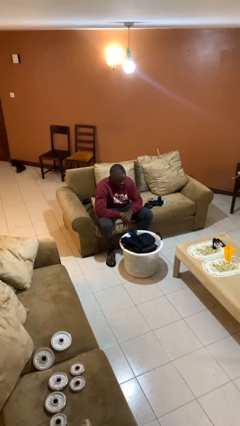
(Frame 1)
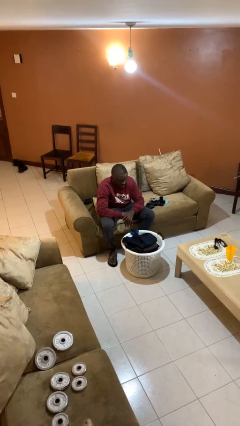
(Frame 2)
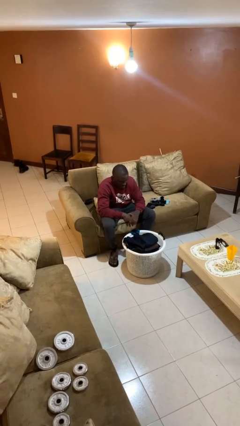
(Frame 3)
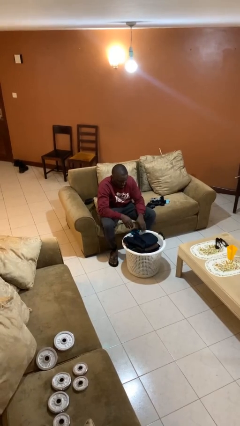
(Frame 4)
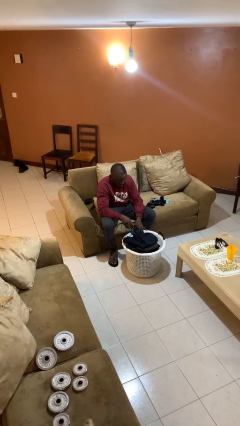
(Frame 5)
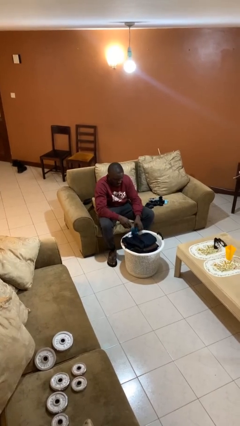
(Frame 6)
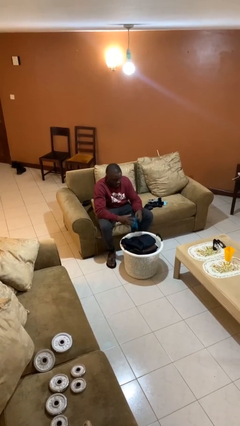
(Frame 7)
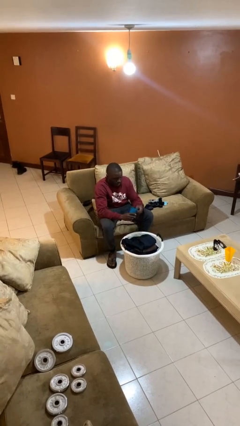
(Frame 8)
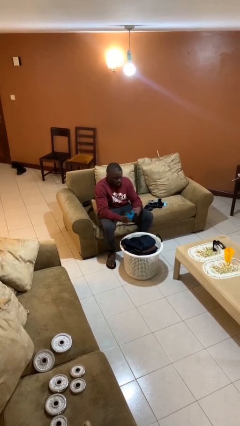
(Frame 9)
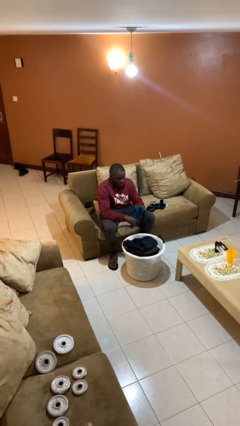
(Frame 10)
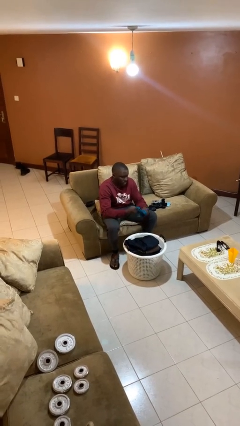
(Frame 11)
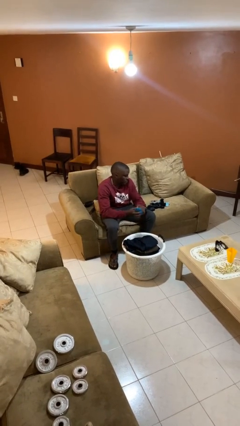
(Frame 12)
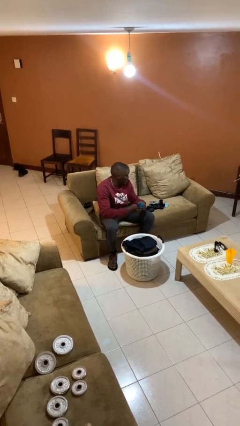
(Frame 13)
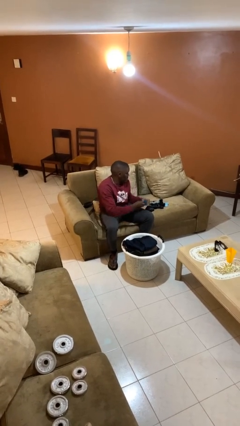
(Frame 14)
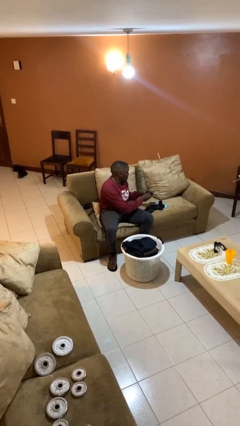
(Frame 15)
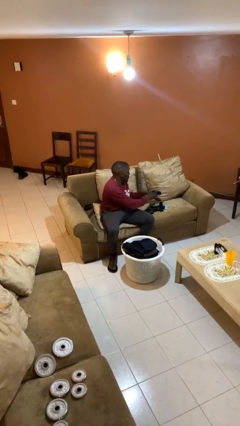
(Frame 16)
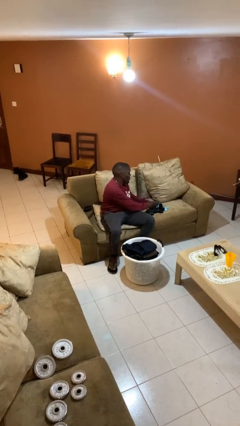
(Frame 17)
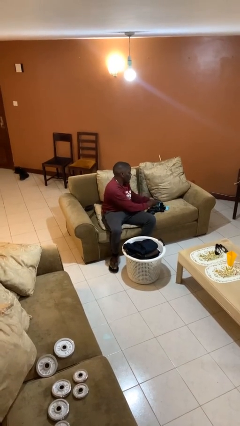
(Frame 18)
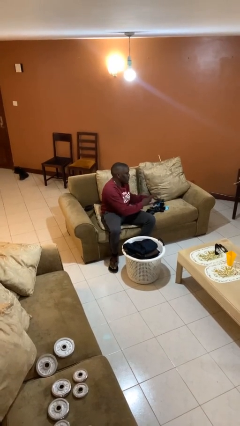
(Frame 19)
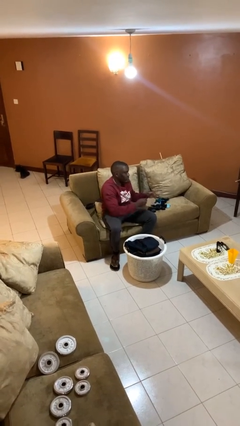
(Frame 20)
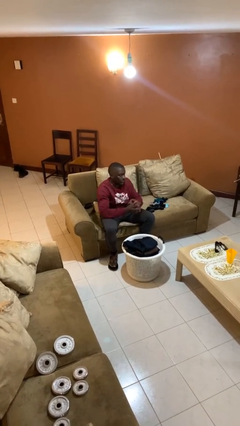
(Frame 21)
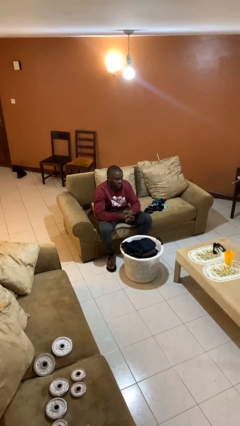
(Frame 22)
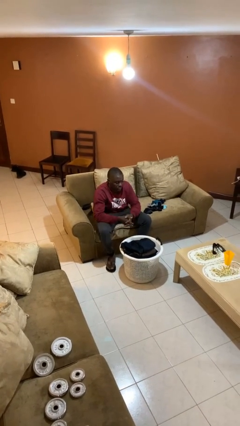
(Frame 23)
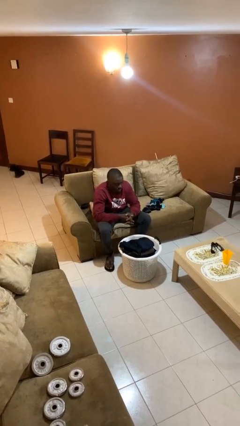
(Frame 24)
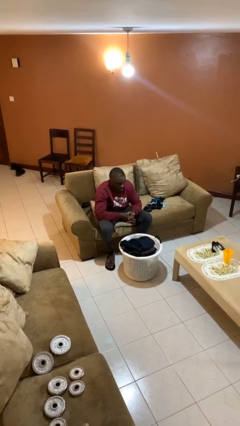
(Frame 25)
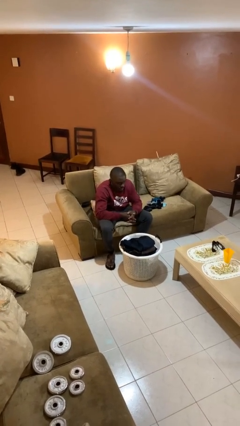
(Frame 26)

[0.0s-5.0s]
person folds socks

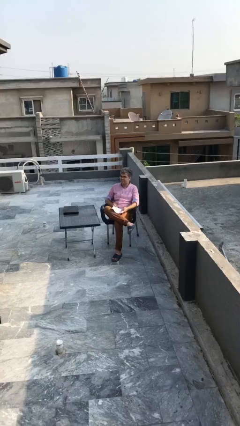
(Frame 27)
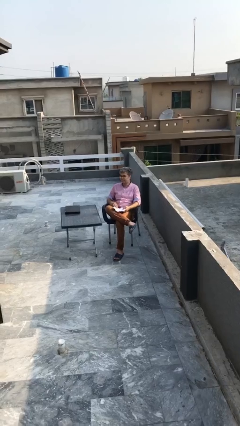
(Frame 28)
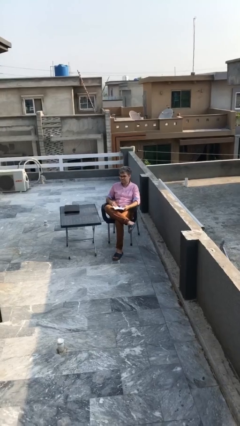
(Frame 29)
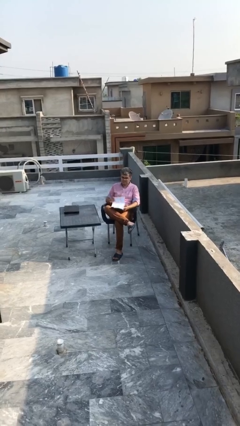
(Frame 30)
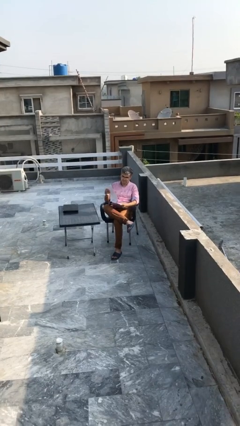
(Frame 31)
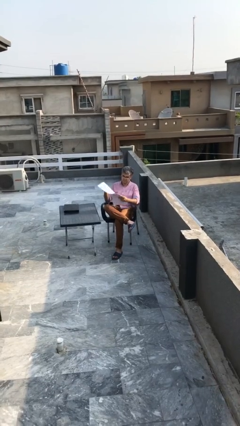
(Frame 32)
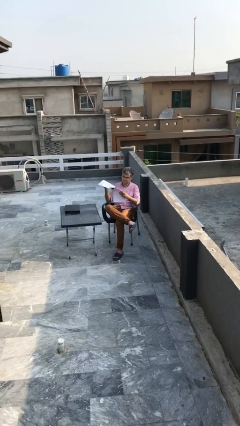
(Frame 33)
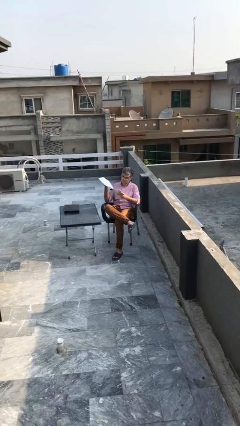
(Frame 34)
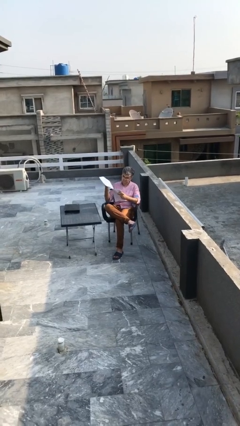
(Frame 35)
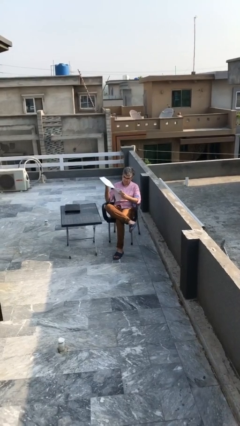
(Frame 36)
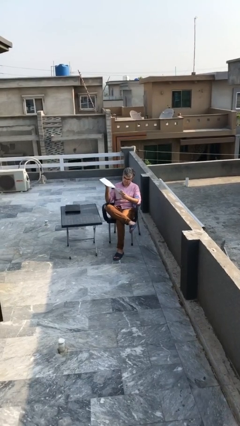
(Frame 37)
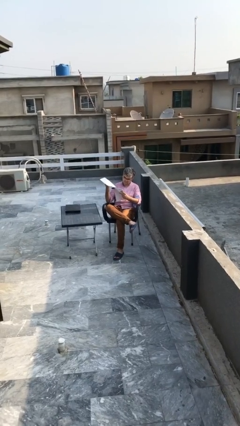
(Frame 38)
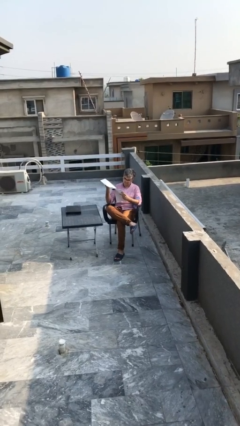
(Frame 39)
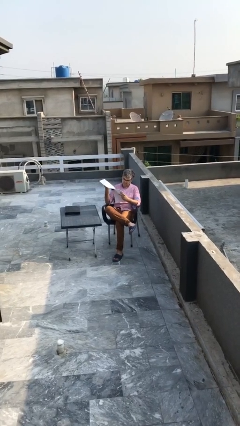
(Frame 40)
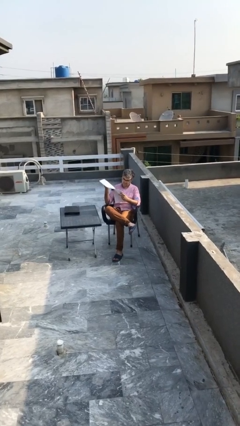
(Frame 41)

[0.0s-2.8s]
person reads document

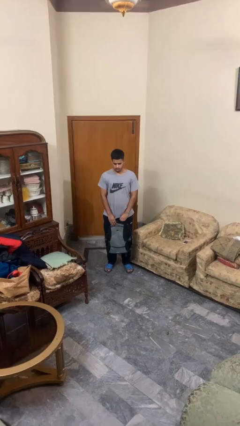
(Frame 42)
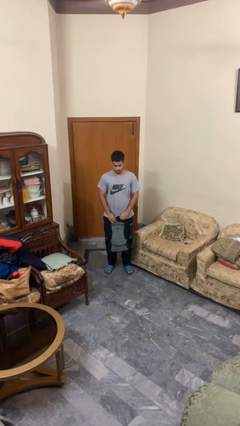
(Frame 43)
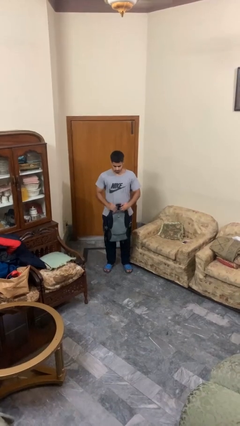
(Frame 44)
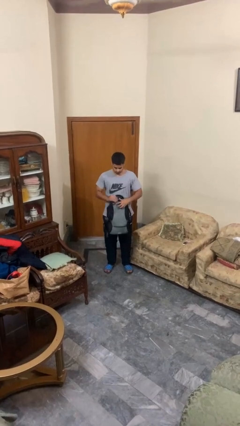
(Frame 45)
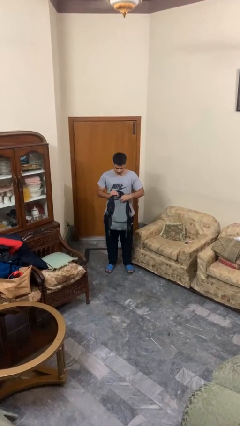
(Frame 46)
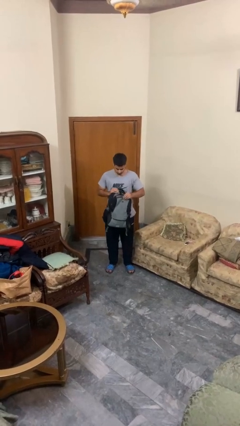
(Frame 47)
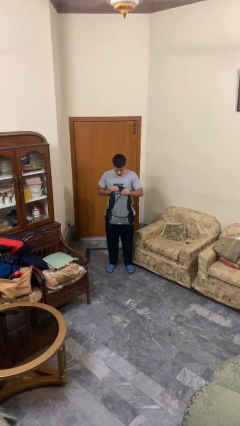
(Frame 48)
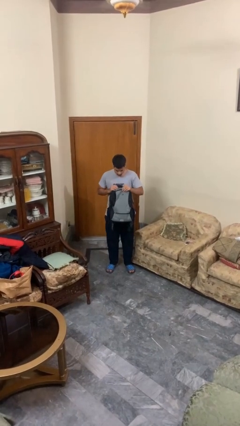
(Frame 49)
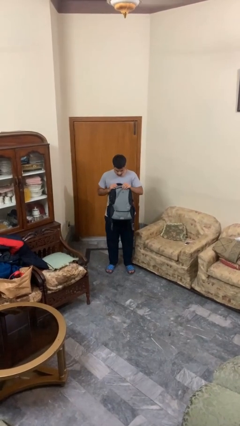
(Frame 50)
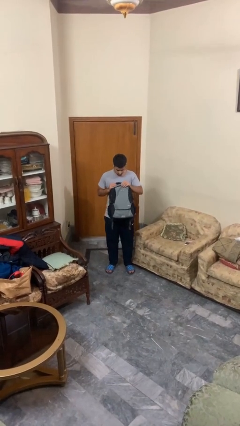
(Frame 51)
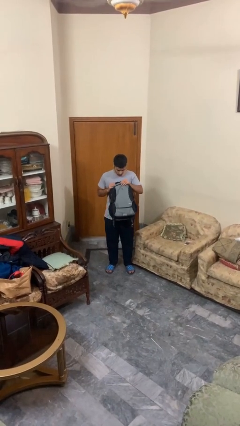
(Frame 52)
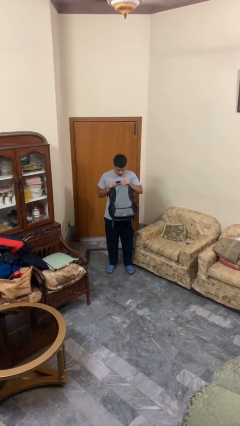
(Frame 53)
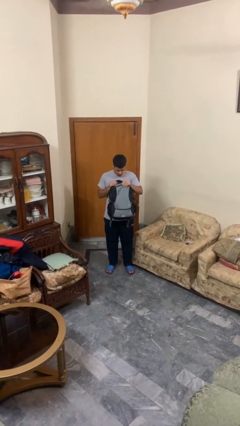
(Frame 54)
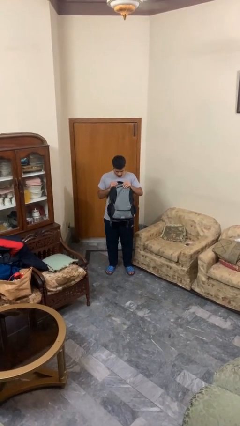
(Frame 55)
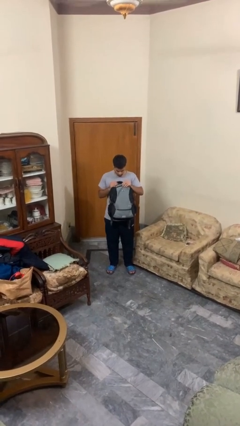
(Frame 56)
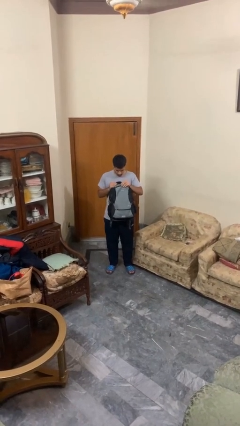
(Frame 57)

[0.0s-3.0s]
person searches in backpack

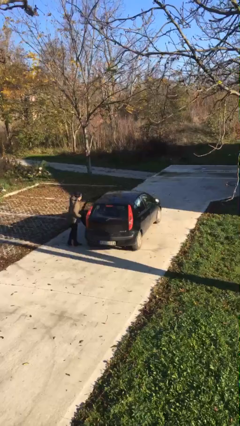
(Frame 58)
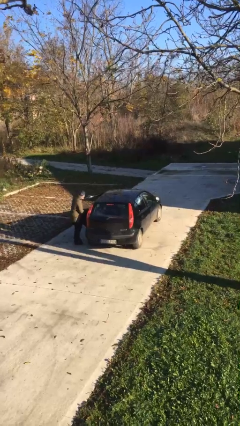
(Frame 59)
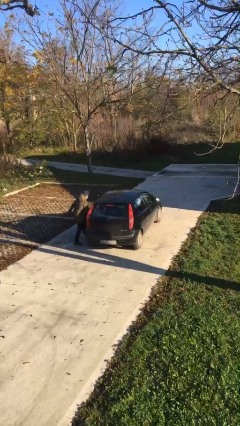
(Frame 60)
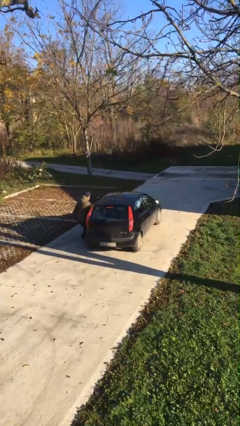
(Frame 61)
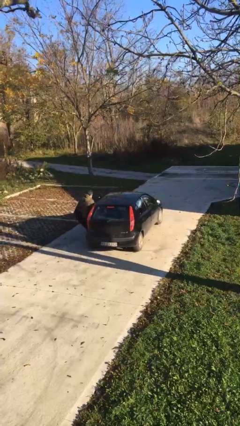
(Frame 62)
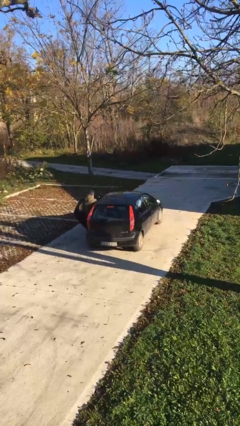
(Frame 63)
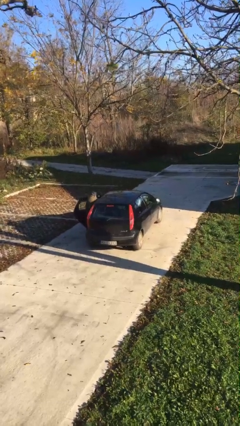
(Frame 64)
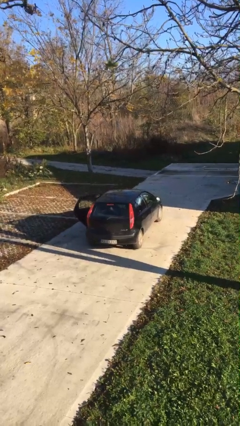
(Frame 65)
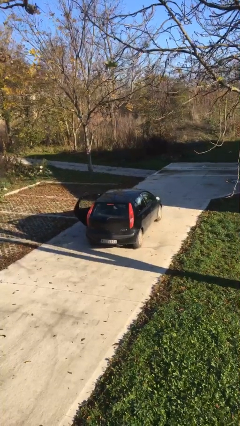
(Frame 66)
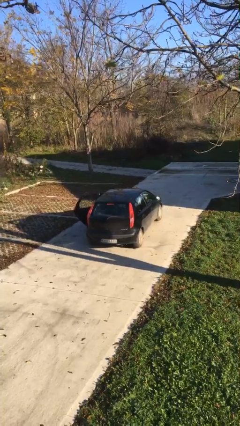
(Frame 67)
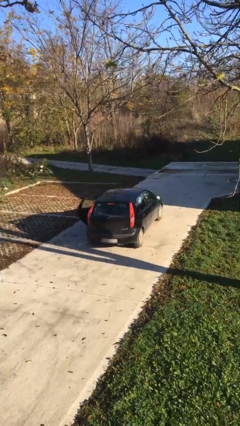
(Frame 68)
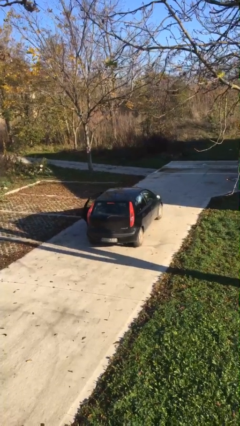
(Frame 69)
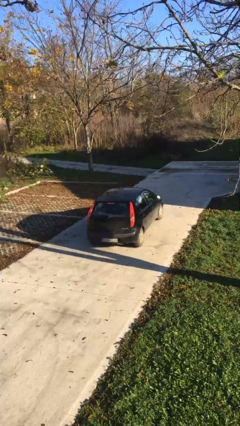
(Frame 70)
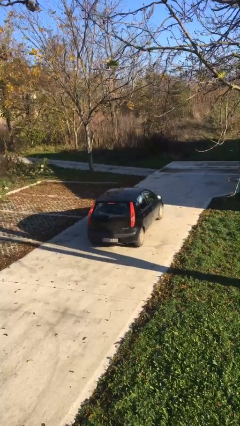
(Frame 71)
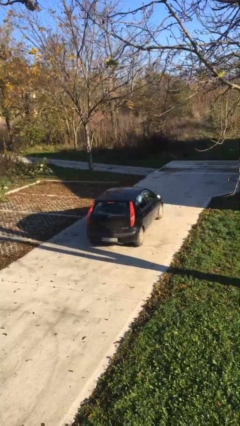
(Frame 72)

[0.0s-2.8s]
car picks up person

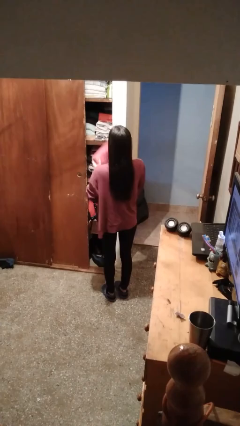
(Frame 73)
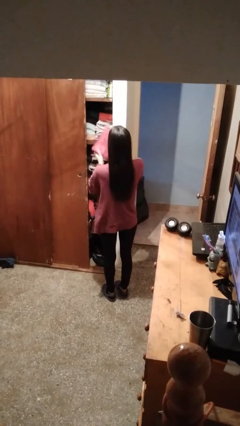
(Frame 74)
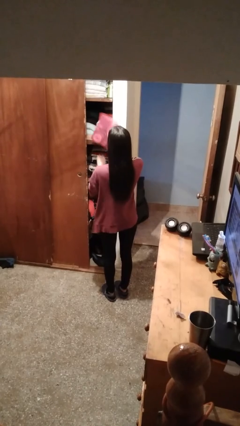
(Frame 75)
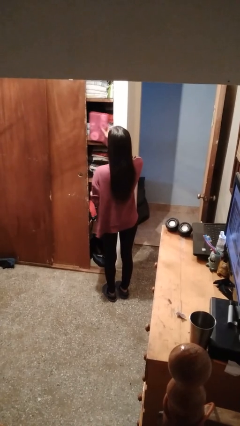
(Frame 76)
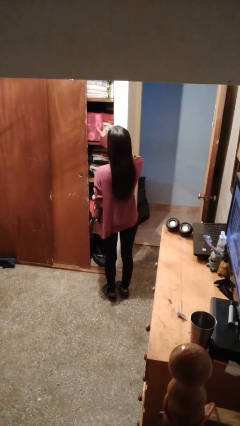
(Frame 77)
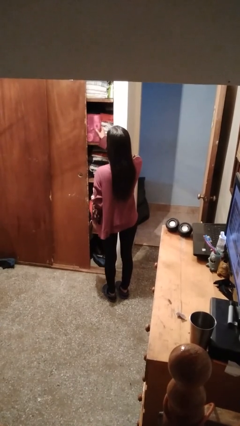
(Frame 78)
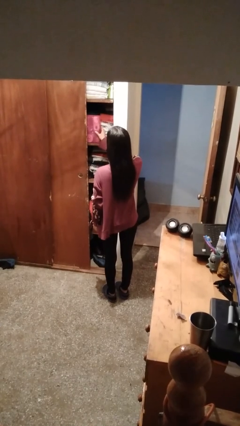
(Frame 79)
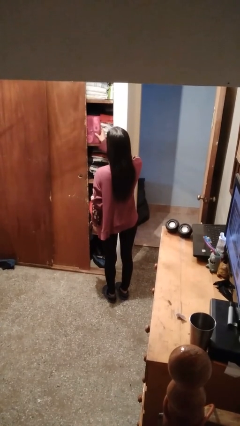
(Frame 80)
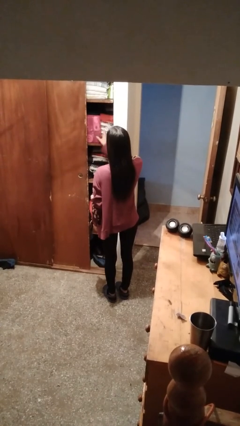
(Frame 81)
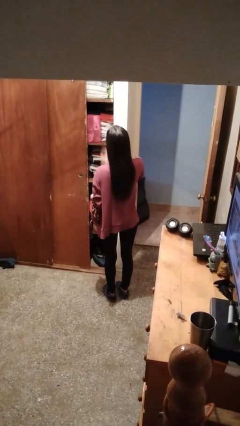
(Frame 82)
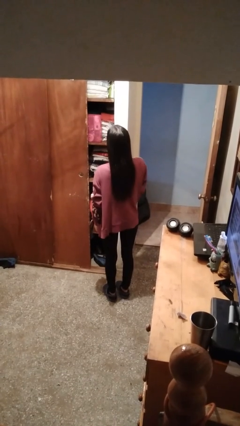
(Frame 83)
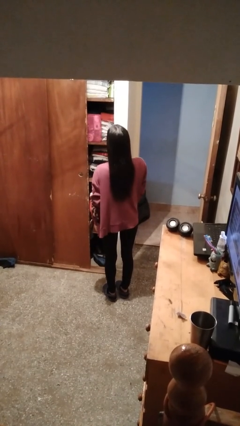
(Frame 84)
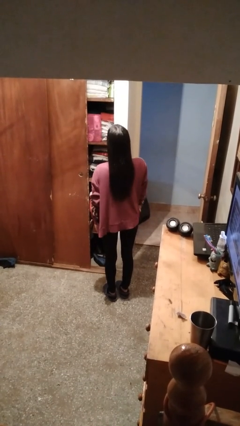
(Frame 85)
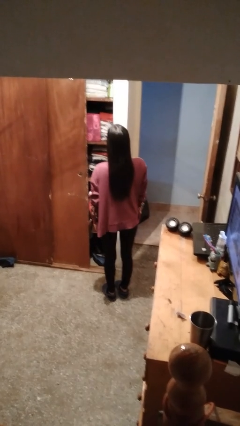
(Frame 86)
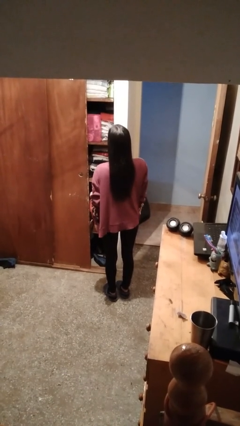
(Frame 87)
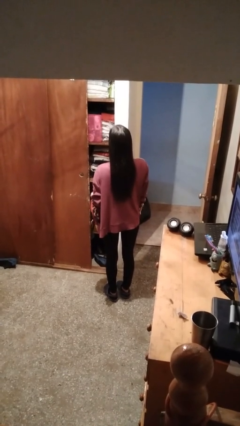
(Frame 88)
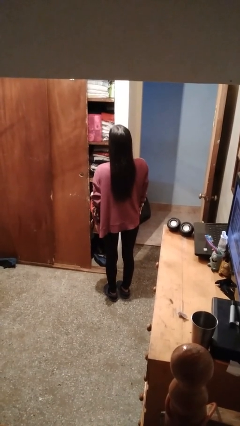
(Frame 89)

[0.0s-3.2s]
person picks up object from shelf

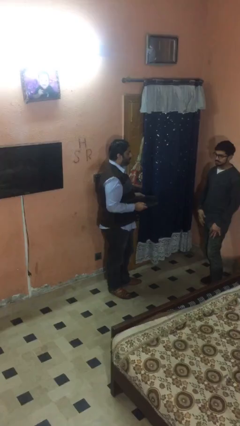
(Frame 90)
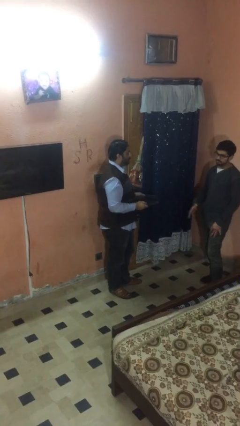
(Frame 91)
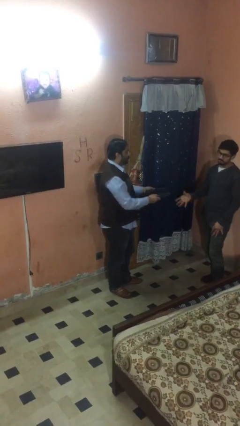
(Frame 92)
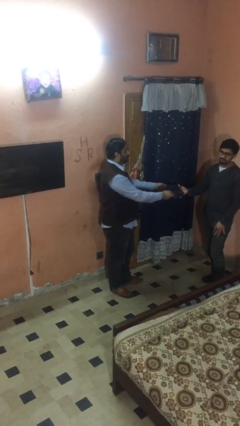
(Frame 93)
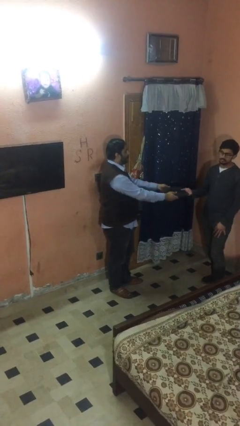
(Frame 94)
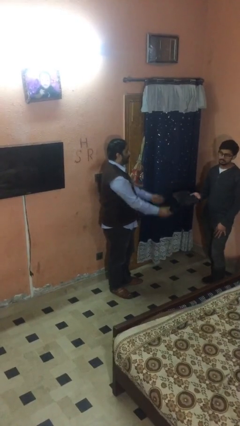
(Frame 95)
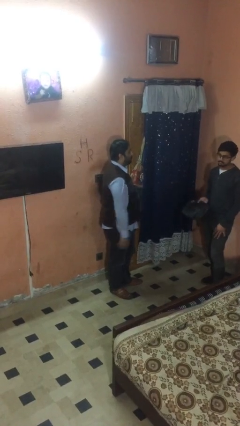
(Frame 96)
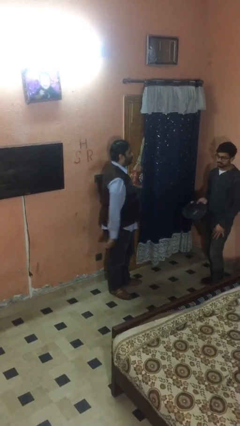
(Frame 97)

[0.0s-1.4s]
person transfers object to person
